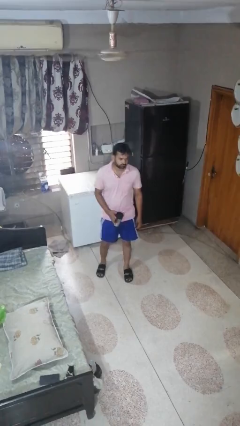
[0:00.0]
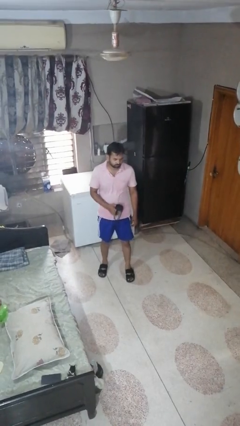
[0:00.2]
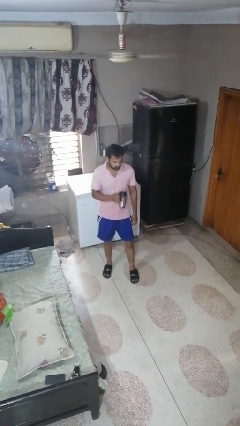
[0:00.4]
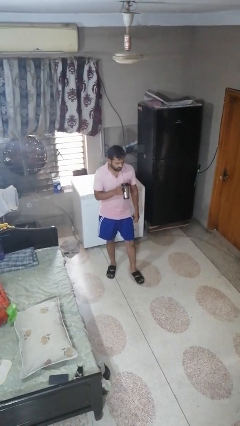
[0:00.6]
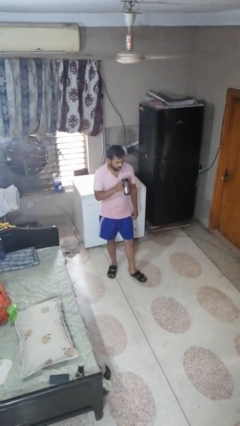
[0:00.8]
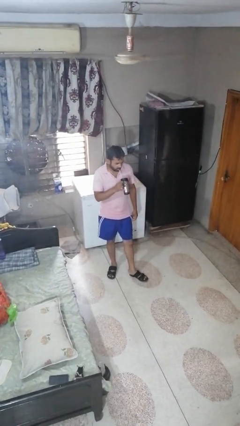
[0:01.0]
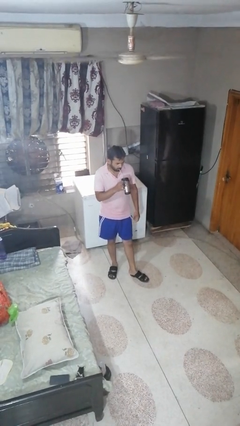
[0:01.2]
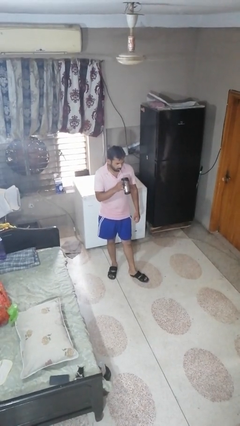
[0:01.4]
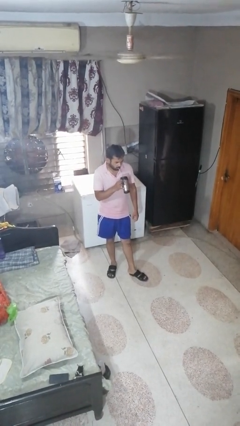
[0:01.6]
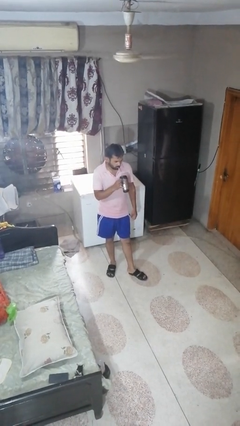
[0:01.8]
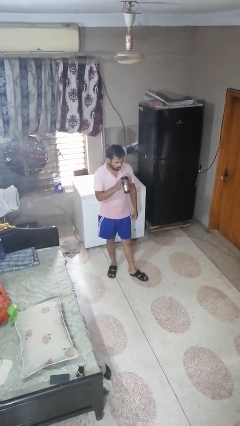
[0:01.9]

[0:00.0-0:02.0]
person drinks from straw

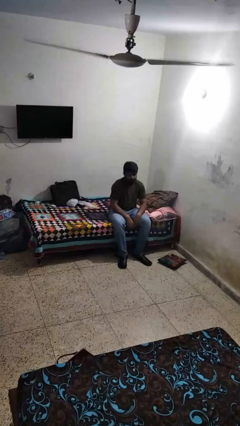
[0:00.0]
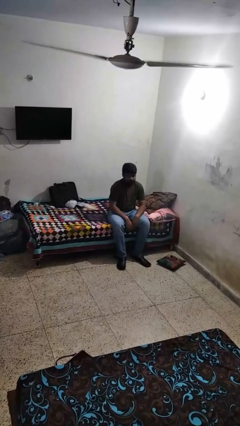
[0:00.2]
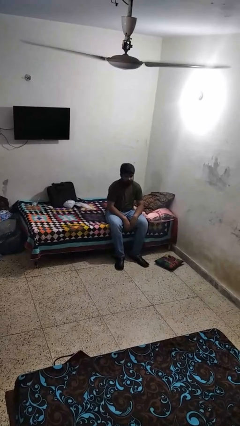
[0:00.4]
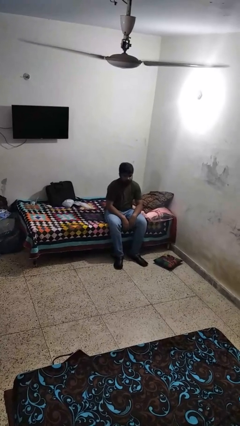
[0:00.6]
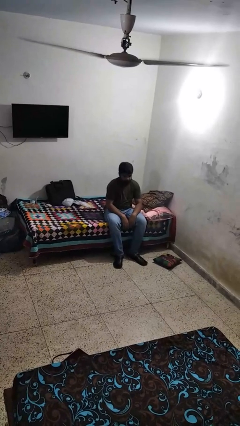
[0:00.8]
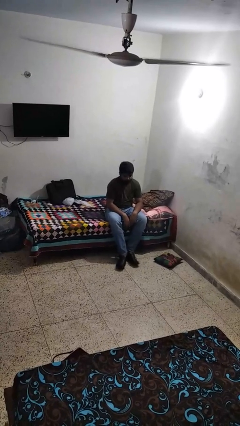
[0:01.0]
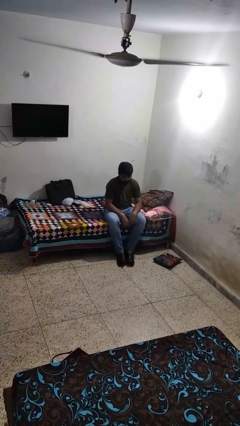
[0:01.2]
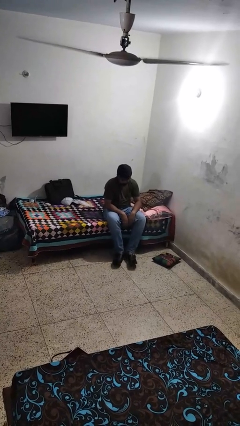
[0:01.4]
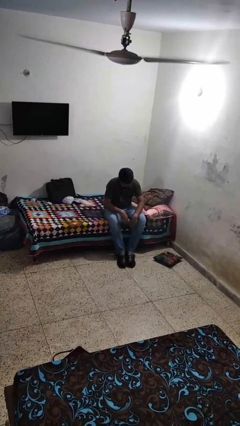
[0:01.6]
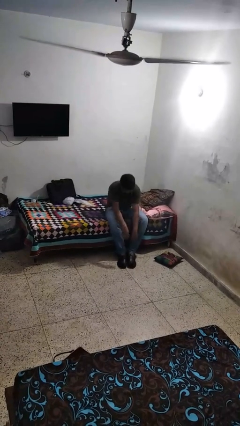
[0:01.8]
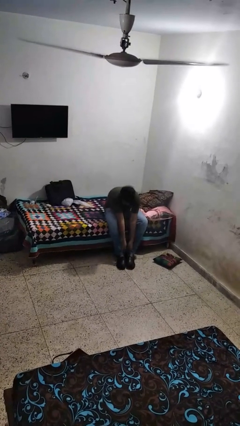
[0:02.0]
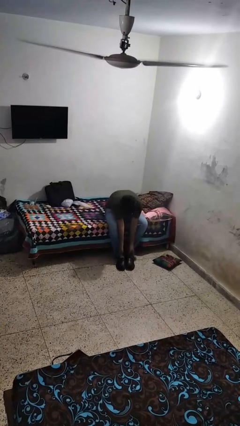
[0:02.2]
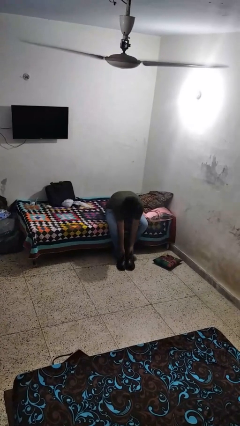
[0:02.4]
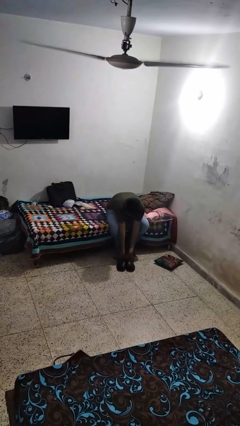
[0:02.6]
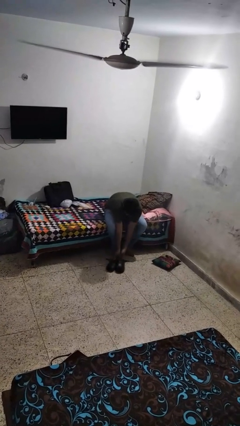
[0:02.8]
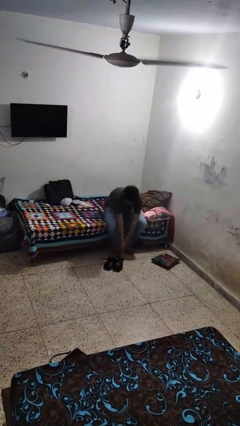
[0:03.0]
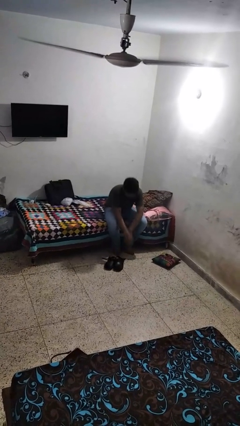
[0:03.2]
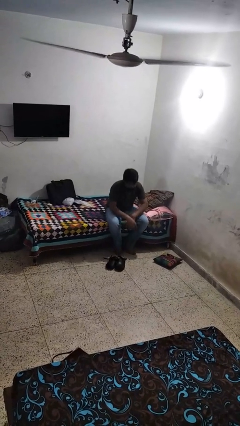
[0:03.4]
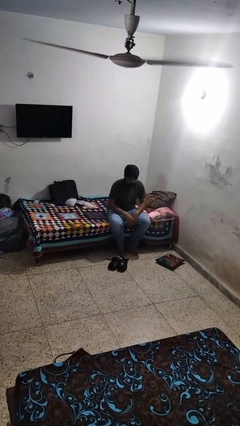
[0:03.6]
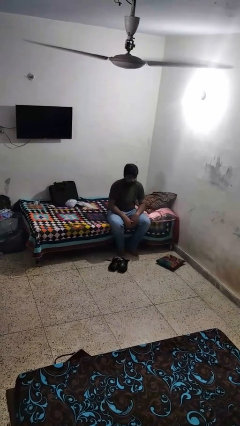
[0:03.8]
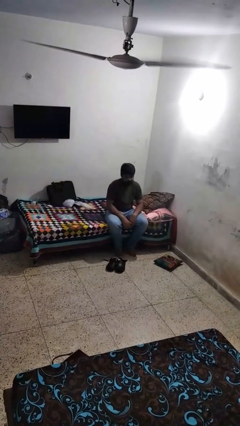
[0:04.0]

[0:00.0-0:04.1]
person takes off shoes

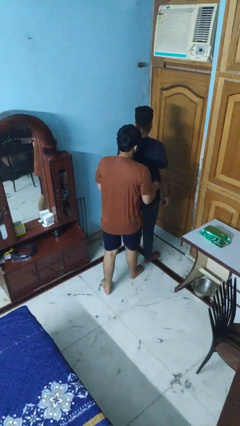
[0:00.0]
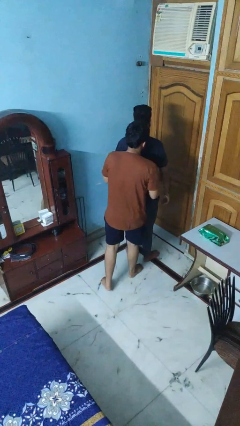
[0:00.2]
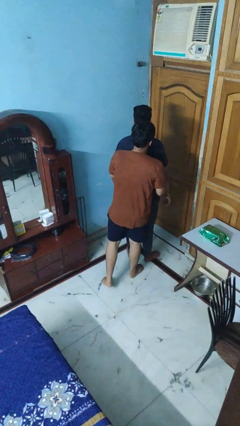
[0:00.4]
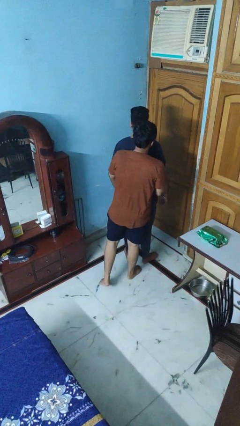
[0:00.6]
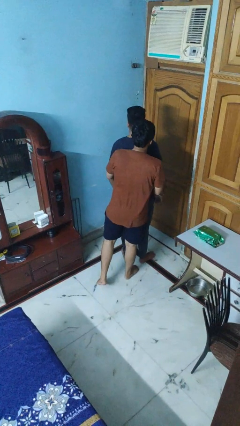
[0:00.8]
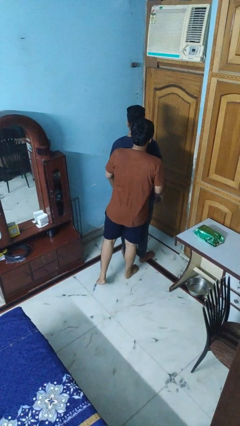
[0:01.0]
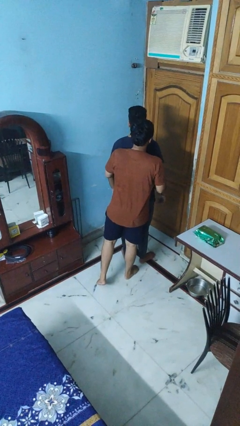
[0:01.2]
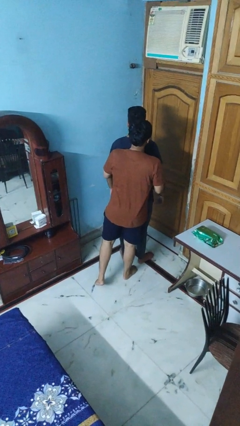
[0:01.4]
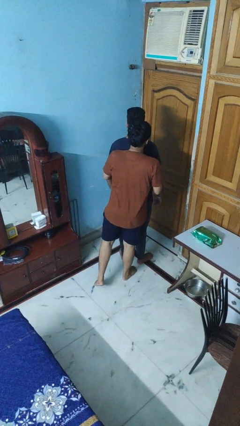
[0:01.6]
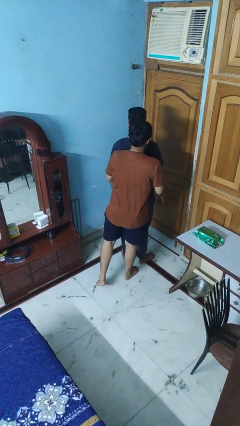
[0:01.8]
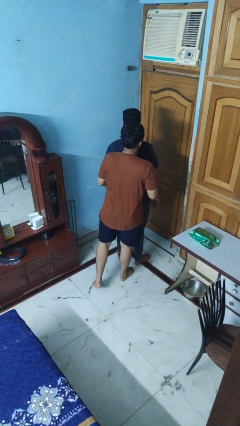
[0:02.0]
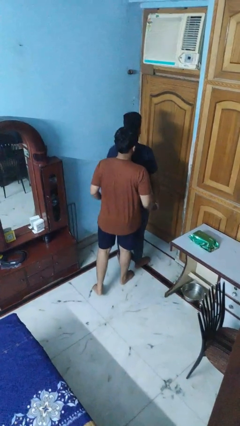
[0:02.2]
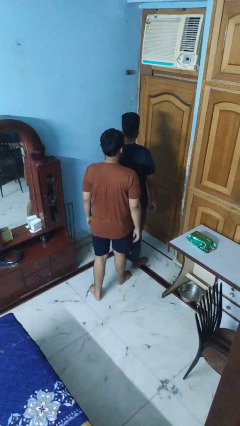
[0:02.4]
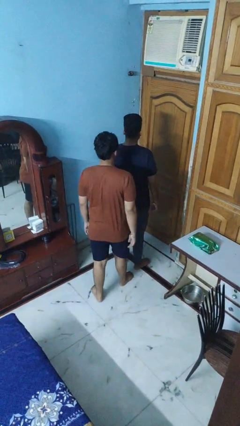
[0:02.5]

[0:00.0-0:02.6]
person hugs person from behind

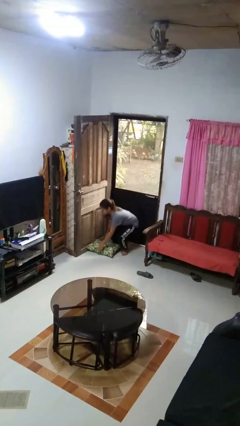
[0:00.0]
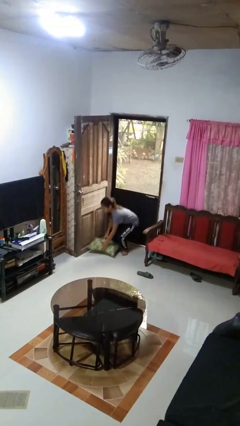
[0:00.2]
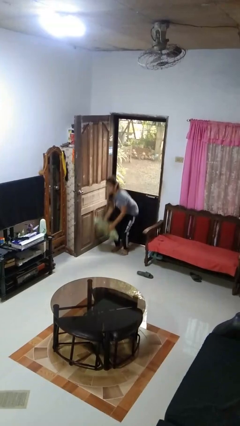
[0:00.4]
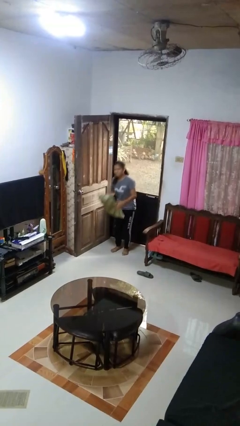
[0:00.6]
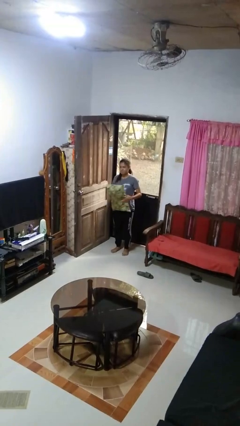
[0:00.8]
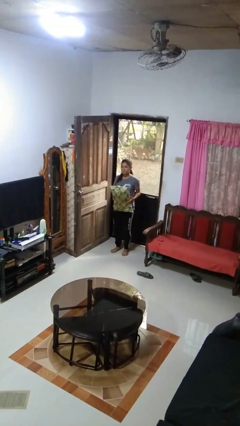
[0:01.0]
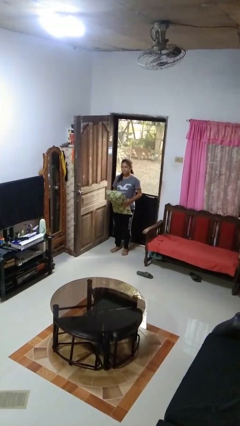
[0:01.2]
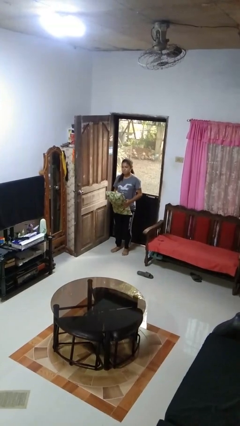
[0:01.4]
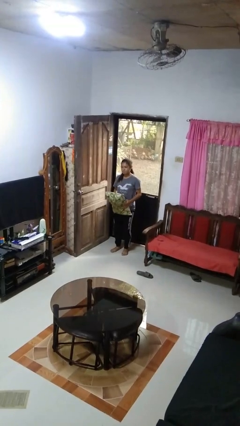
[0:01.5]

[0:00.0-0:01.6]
person picks up object from floor

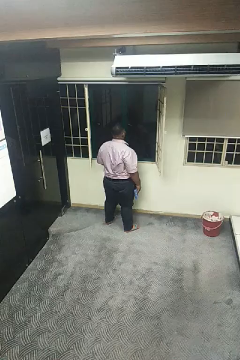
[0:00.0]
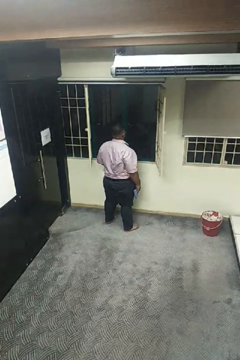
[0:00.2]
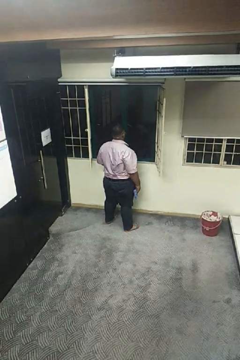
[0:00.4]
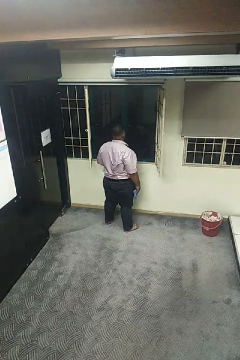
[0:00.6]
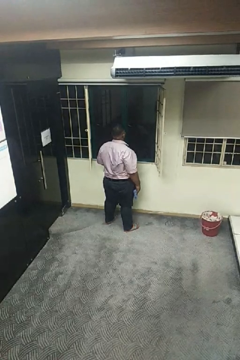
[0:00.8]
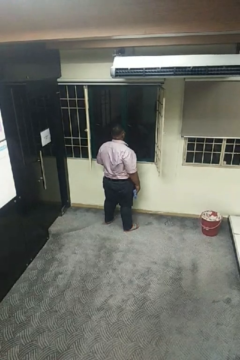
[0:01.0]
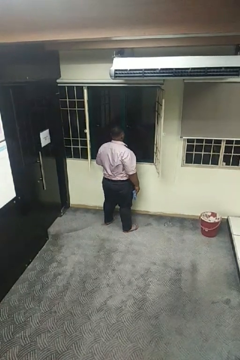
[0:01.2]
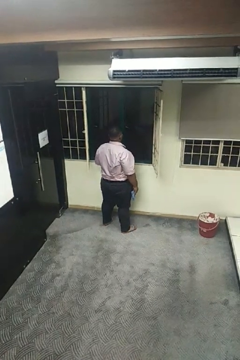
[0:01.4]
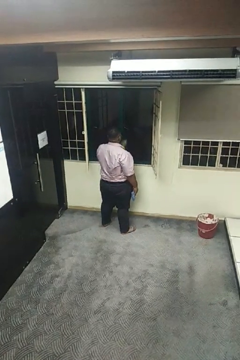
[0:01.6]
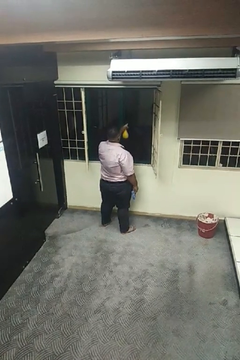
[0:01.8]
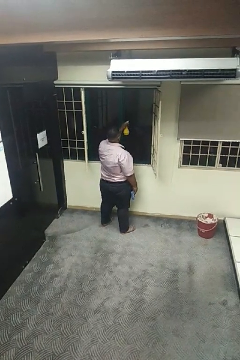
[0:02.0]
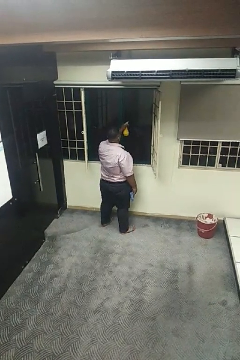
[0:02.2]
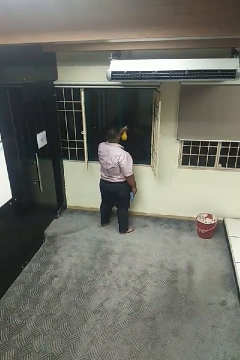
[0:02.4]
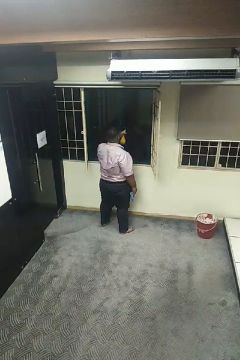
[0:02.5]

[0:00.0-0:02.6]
person sprays from bottle

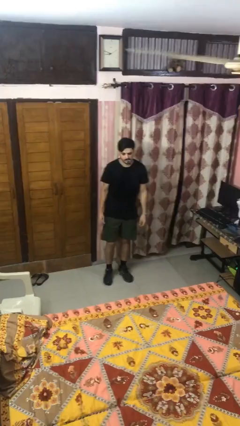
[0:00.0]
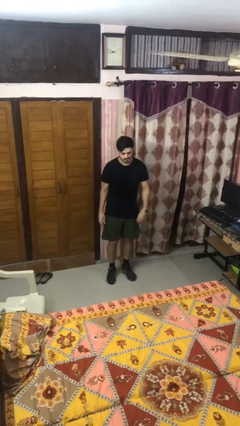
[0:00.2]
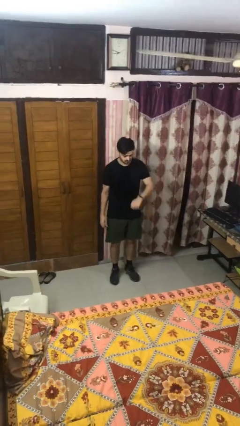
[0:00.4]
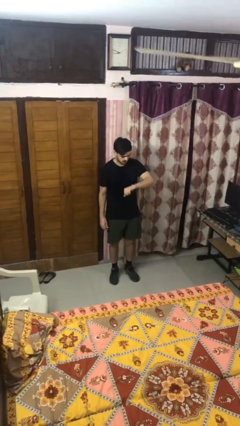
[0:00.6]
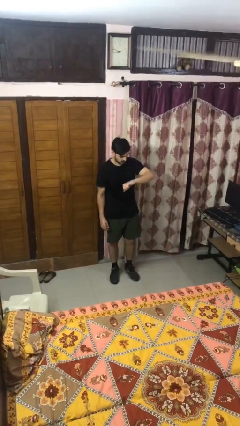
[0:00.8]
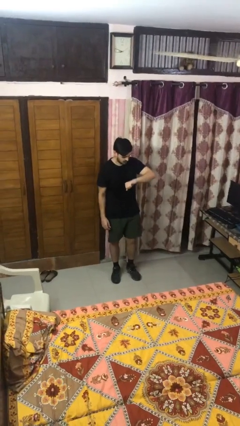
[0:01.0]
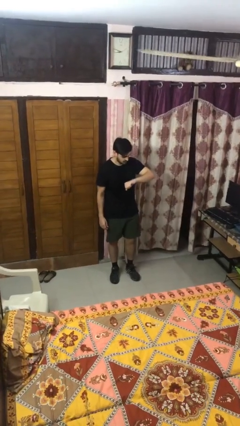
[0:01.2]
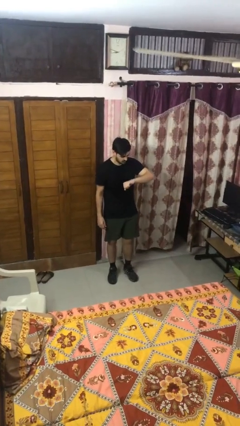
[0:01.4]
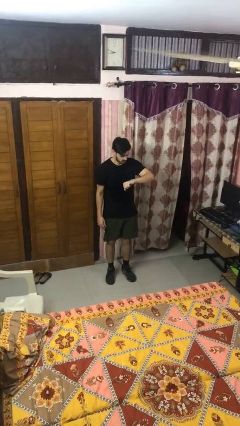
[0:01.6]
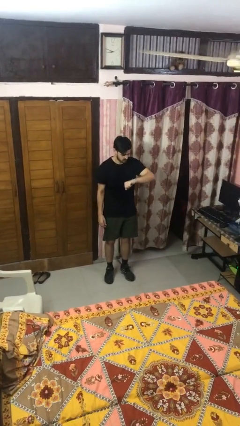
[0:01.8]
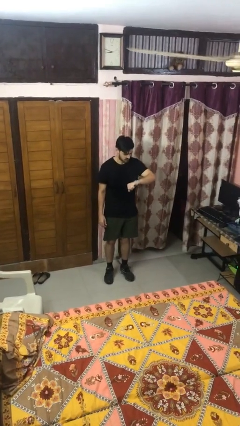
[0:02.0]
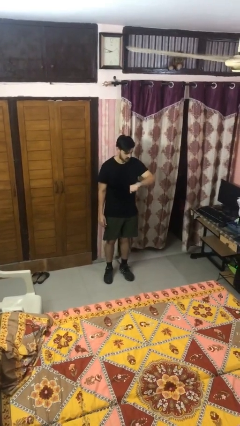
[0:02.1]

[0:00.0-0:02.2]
person looks at wristwatch

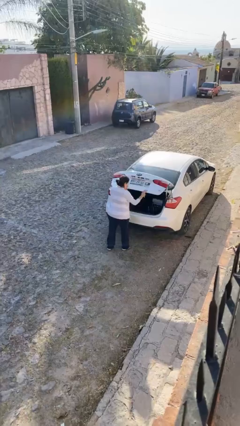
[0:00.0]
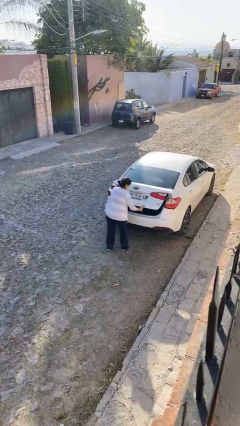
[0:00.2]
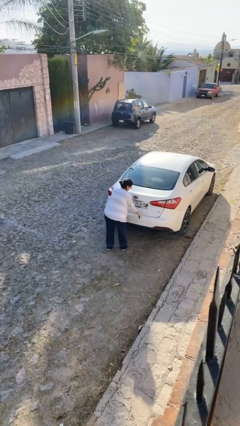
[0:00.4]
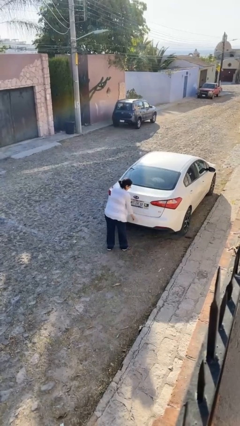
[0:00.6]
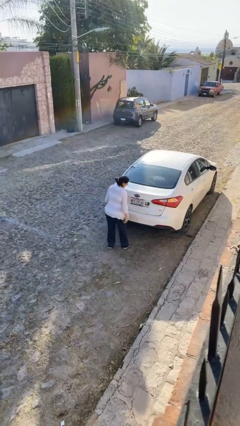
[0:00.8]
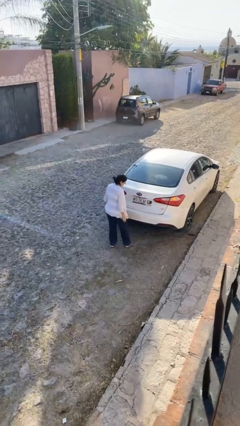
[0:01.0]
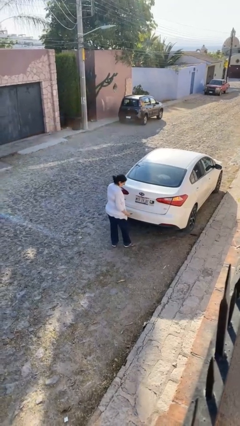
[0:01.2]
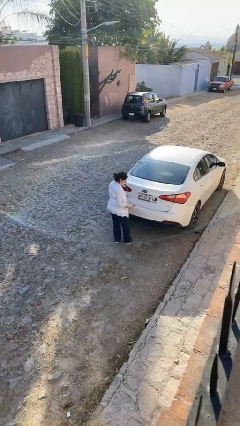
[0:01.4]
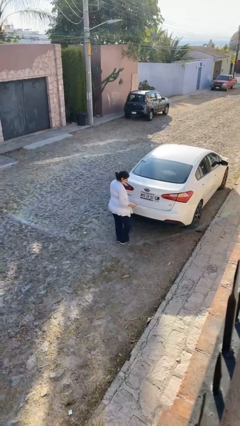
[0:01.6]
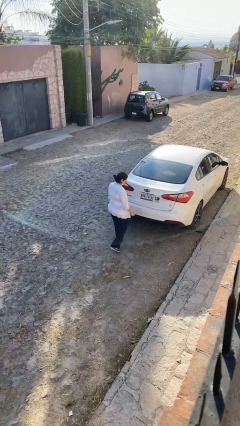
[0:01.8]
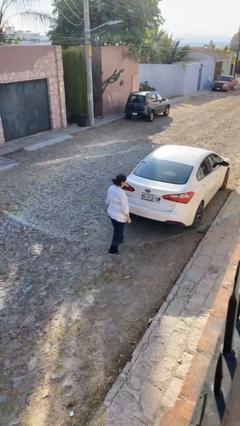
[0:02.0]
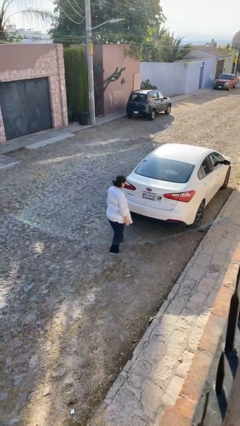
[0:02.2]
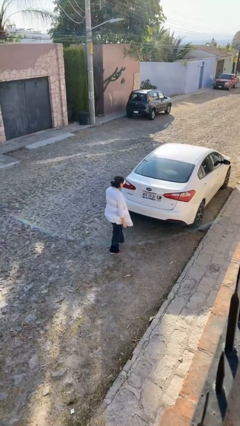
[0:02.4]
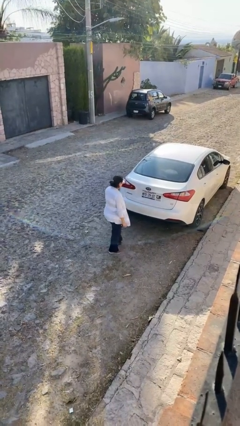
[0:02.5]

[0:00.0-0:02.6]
person closes car trunk
